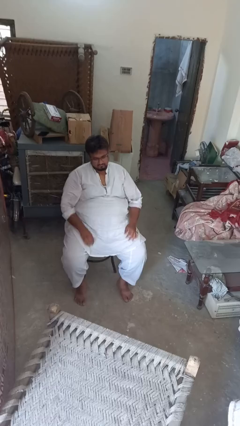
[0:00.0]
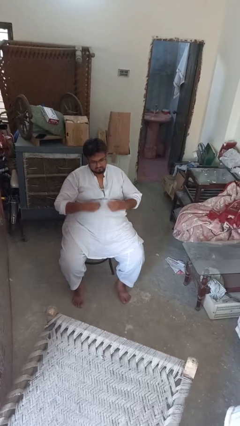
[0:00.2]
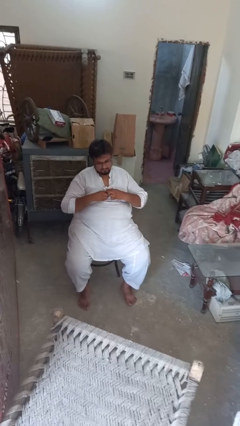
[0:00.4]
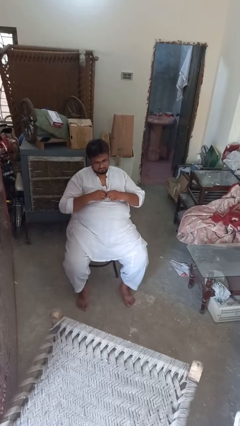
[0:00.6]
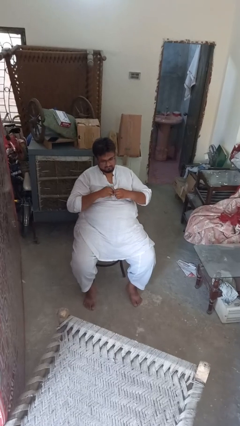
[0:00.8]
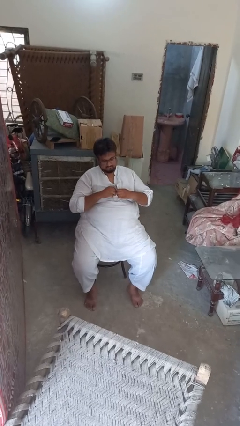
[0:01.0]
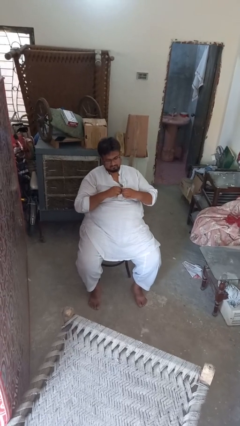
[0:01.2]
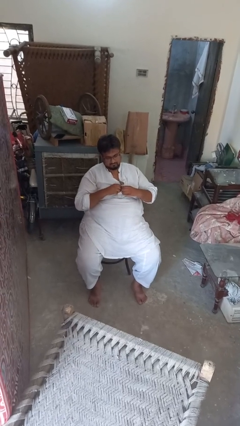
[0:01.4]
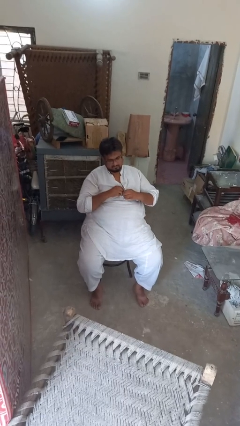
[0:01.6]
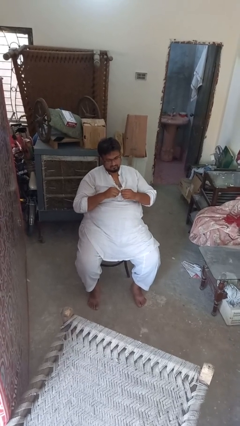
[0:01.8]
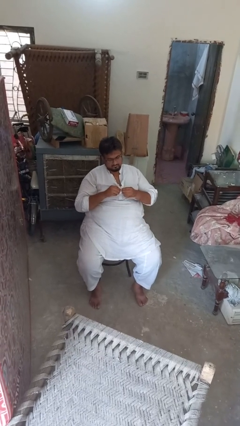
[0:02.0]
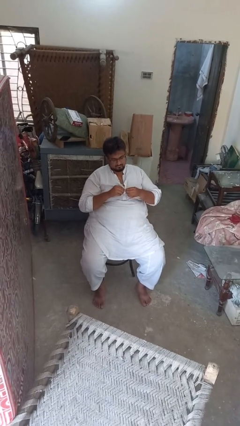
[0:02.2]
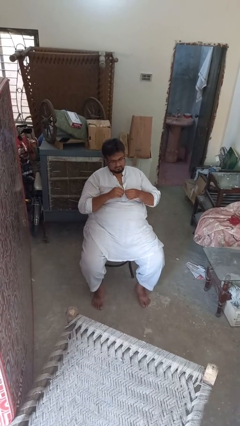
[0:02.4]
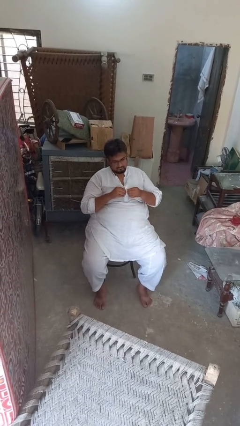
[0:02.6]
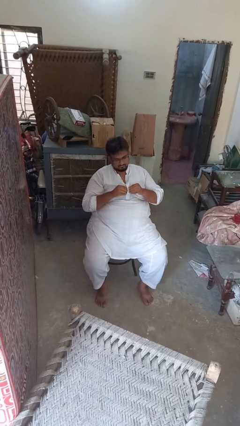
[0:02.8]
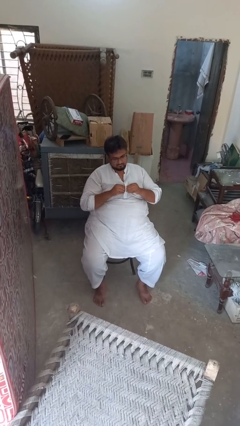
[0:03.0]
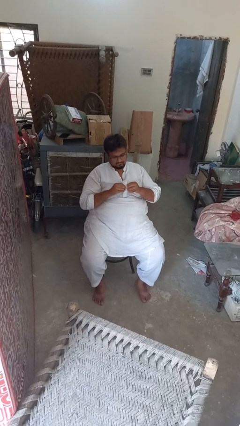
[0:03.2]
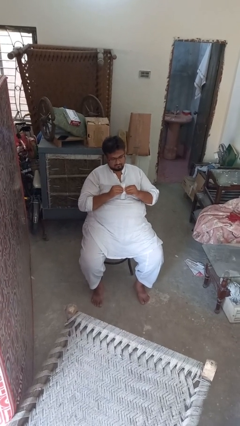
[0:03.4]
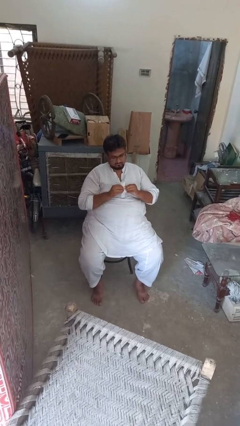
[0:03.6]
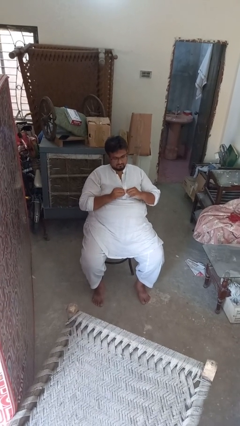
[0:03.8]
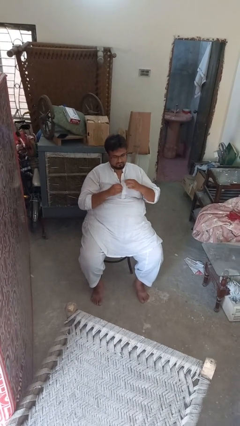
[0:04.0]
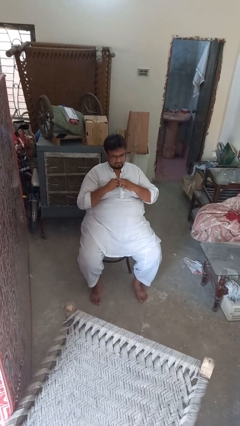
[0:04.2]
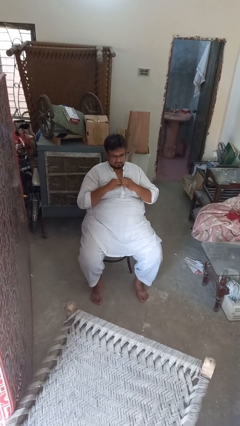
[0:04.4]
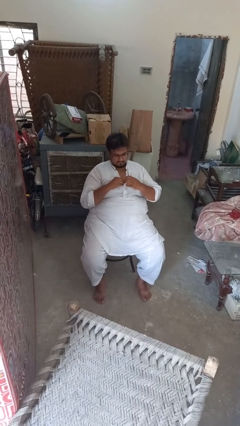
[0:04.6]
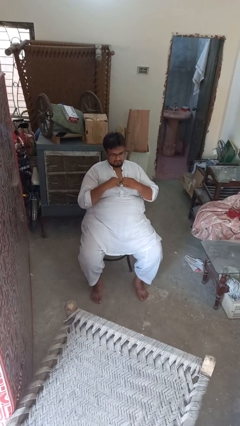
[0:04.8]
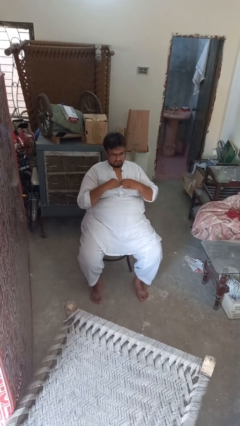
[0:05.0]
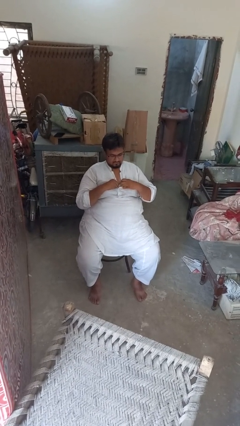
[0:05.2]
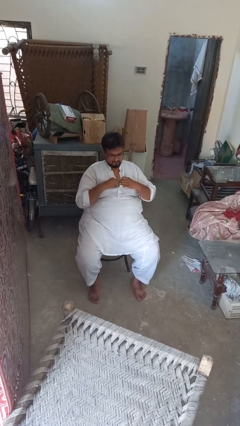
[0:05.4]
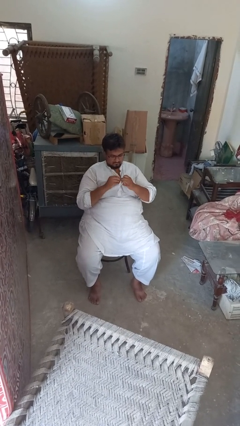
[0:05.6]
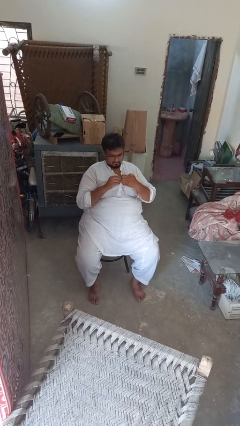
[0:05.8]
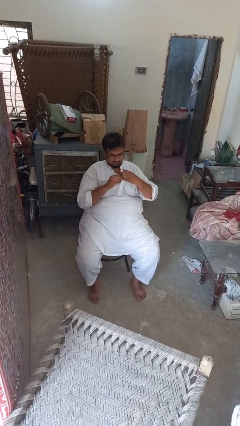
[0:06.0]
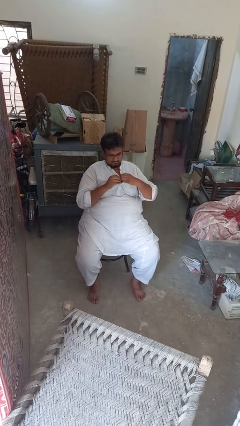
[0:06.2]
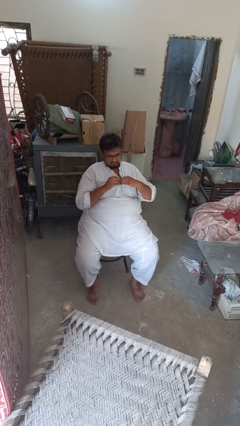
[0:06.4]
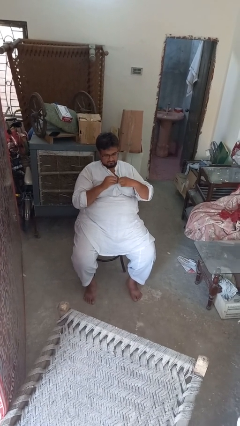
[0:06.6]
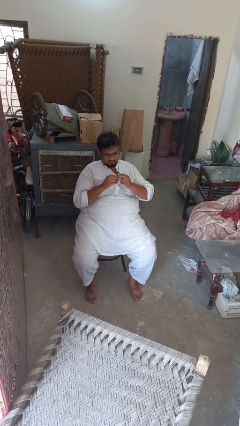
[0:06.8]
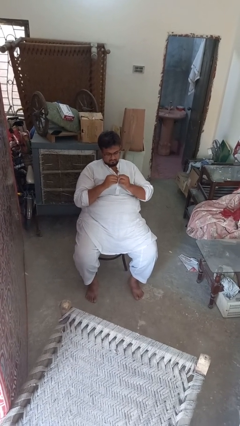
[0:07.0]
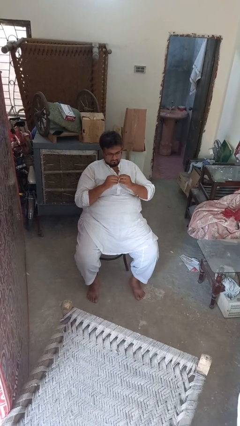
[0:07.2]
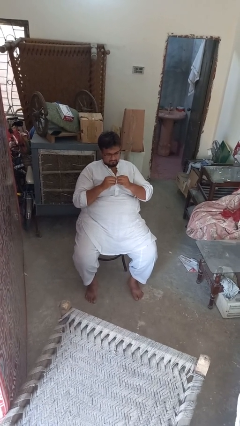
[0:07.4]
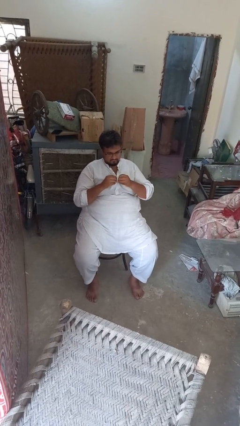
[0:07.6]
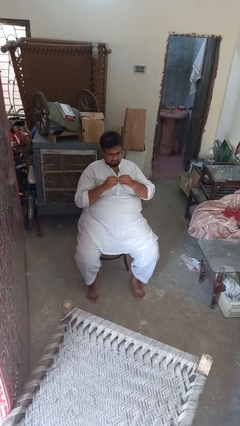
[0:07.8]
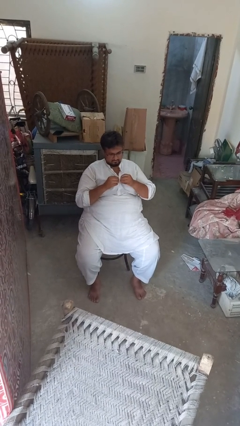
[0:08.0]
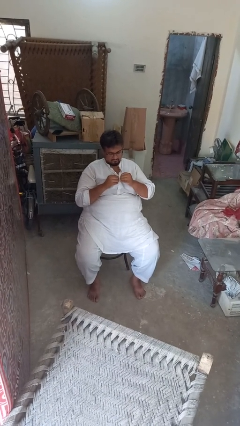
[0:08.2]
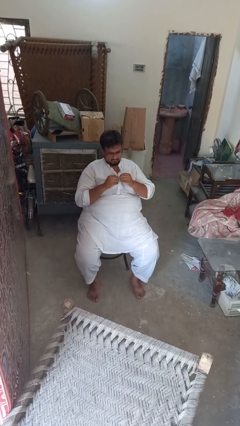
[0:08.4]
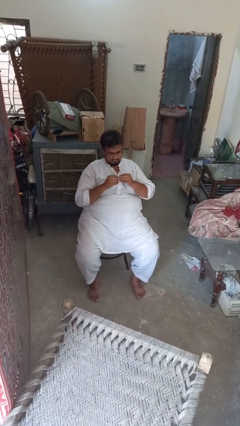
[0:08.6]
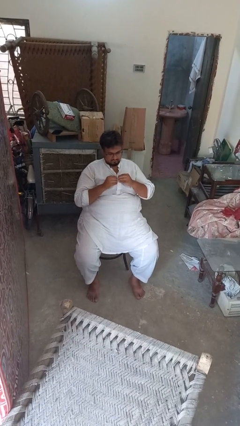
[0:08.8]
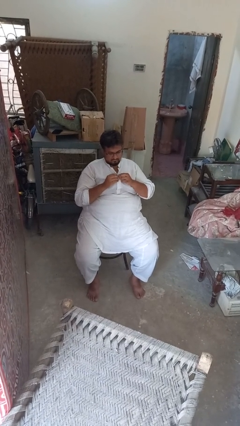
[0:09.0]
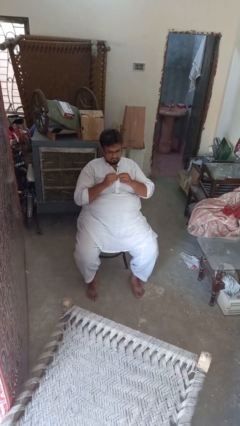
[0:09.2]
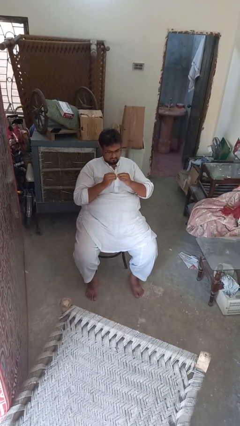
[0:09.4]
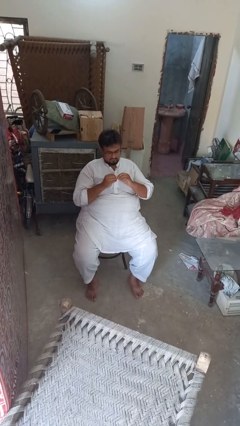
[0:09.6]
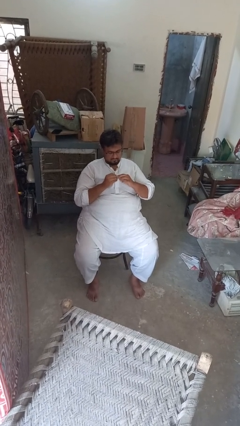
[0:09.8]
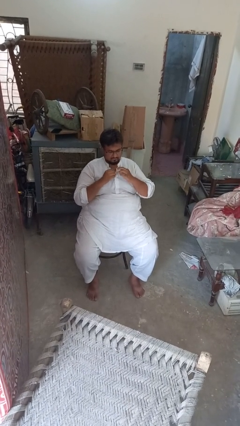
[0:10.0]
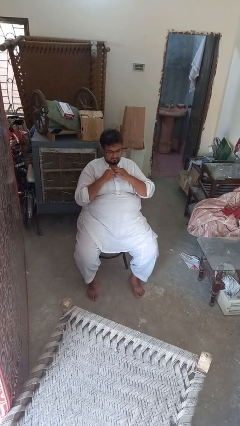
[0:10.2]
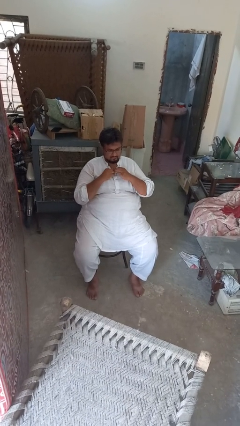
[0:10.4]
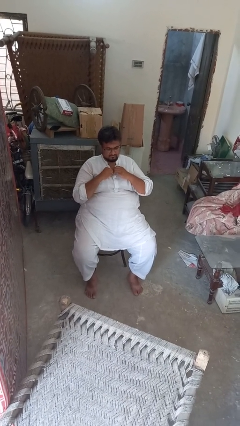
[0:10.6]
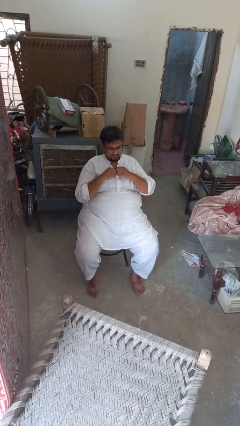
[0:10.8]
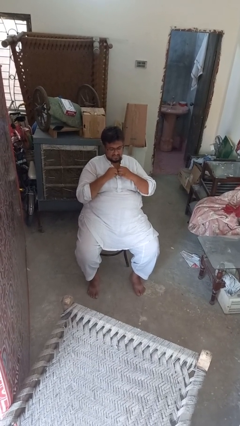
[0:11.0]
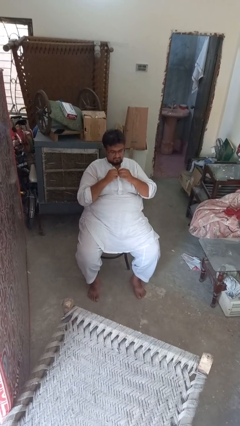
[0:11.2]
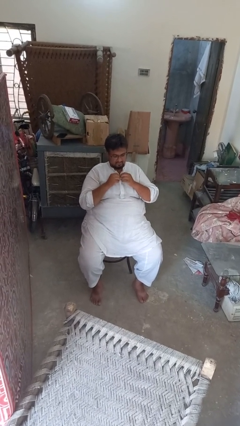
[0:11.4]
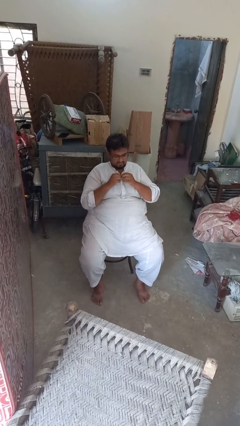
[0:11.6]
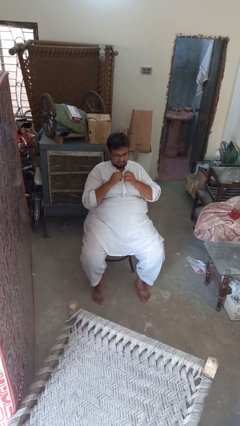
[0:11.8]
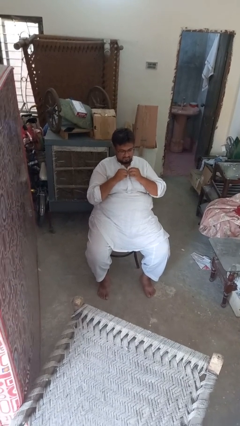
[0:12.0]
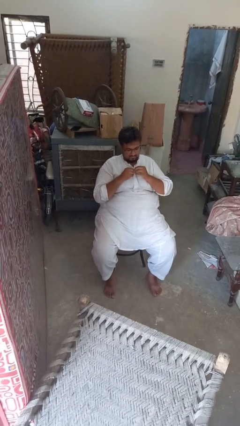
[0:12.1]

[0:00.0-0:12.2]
person buttons shirt

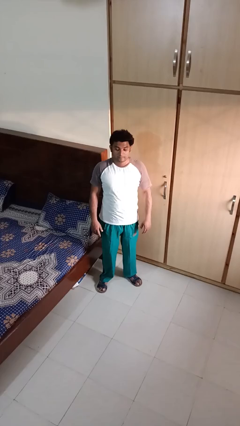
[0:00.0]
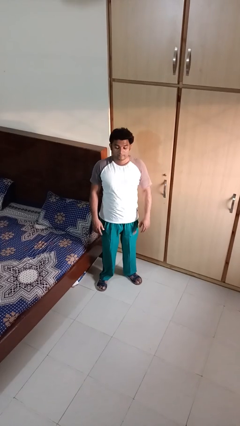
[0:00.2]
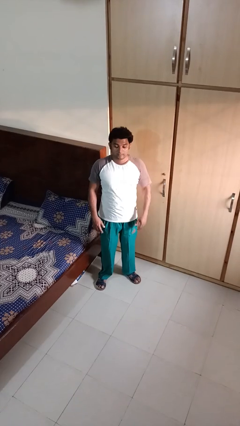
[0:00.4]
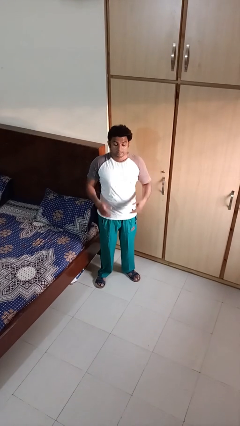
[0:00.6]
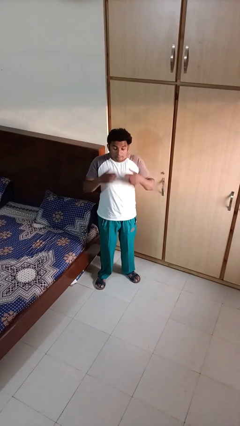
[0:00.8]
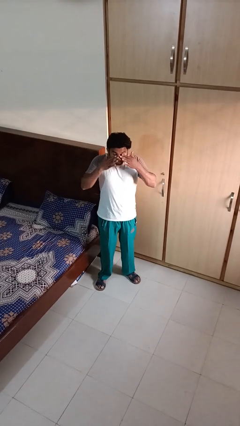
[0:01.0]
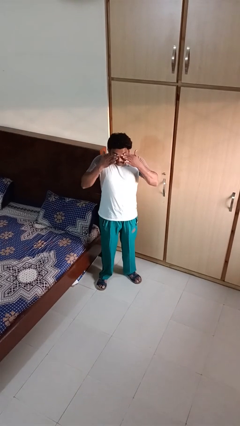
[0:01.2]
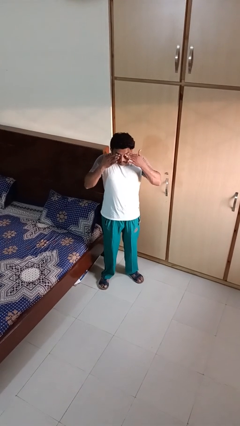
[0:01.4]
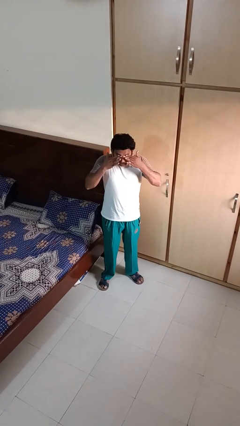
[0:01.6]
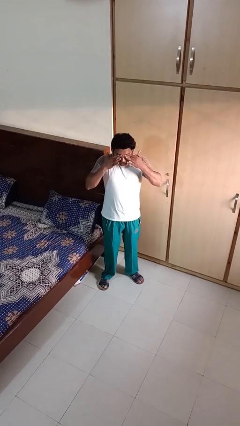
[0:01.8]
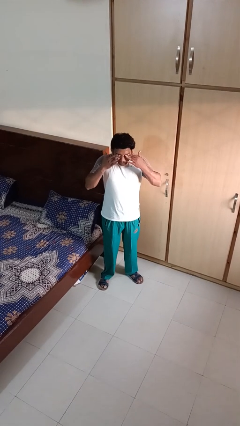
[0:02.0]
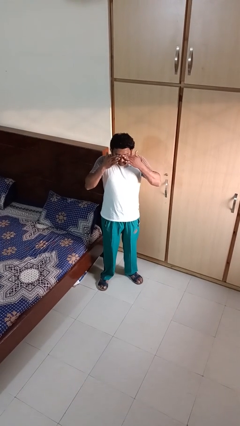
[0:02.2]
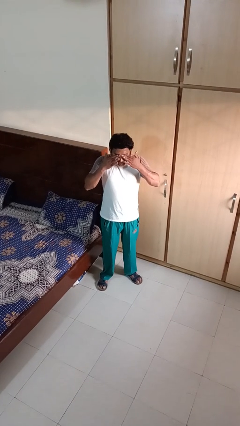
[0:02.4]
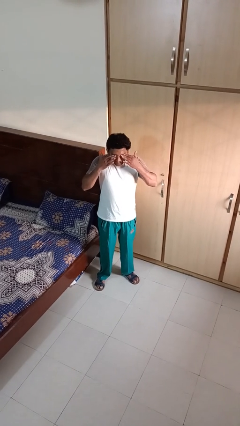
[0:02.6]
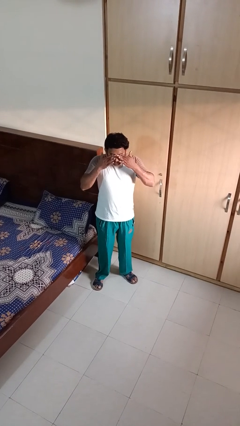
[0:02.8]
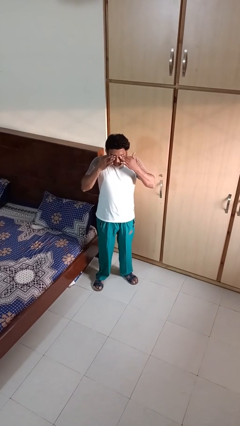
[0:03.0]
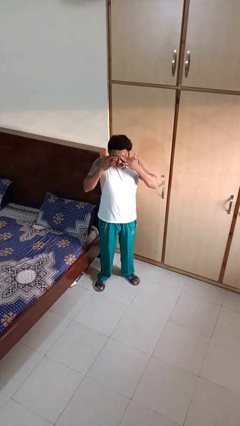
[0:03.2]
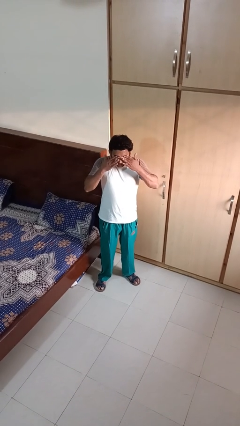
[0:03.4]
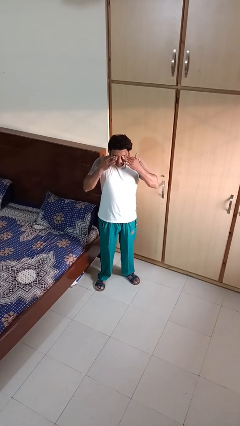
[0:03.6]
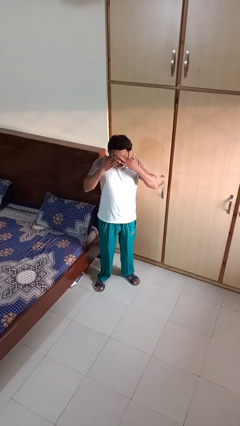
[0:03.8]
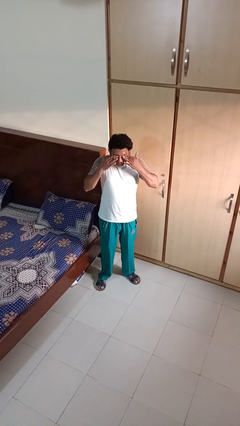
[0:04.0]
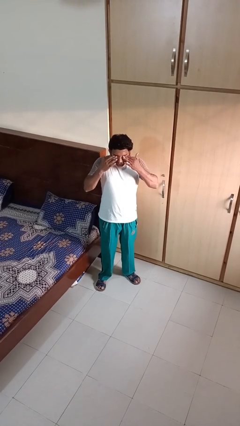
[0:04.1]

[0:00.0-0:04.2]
person rubs eyes

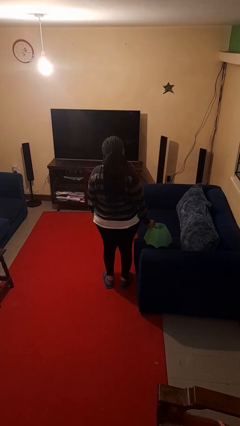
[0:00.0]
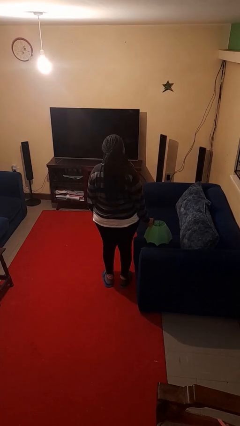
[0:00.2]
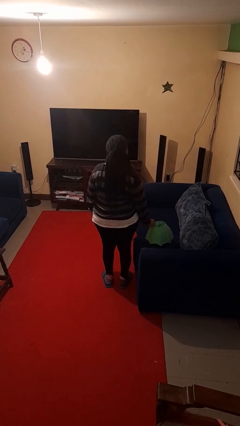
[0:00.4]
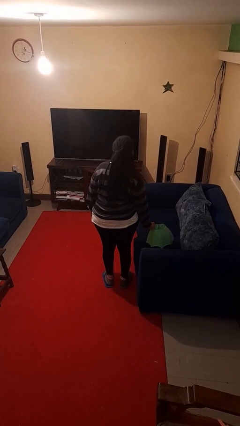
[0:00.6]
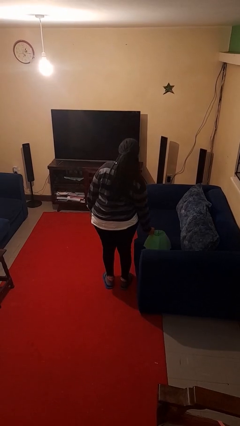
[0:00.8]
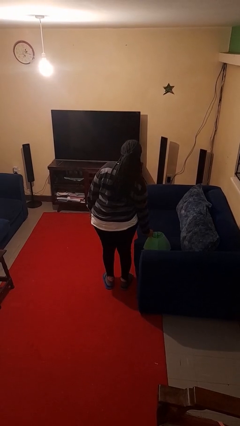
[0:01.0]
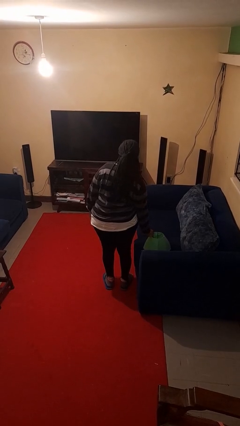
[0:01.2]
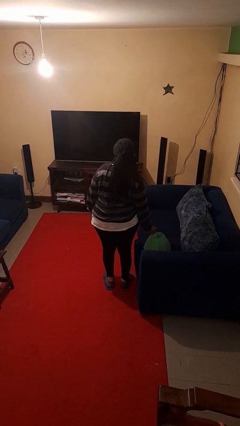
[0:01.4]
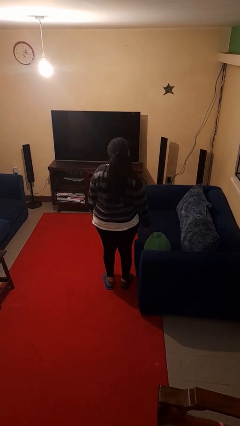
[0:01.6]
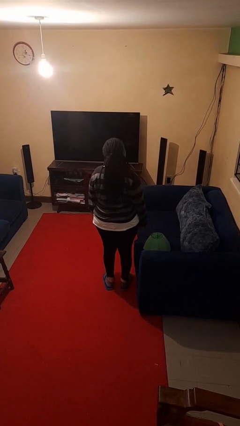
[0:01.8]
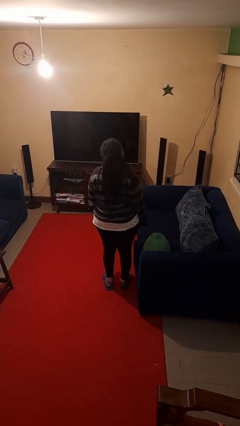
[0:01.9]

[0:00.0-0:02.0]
person puts down object on couch
